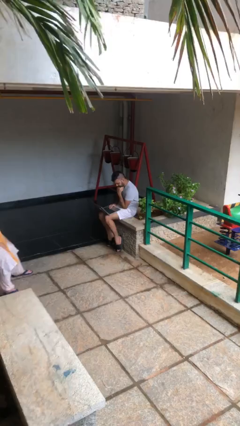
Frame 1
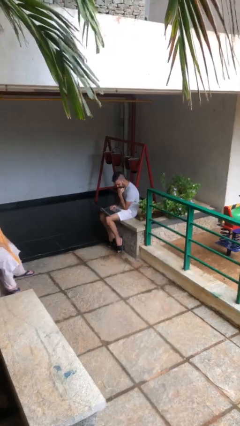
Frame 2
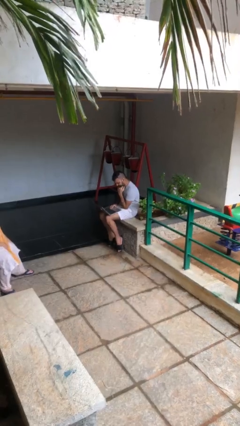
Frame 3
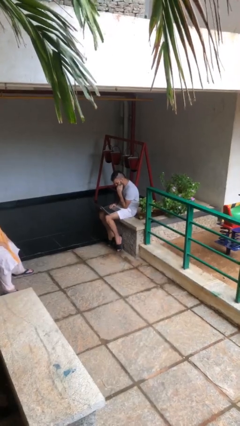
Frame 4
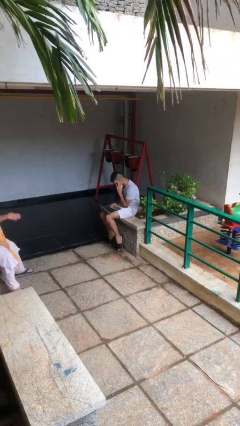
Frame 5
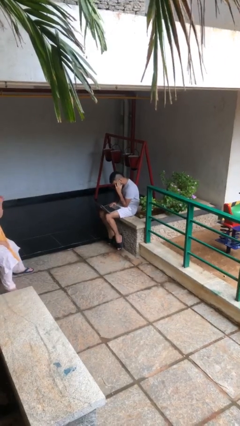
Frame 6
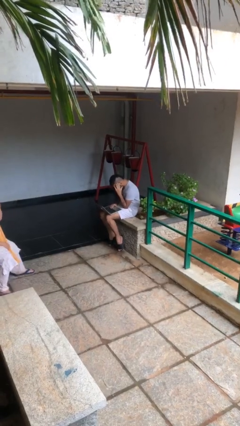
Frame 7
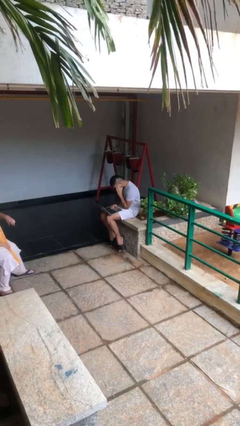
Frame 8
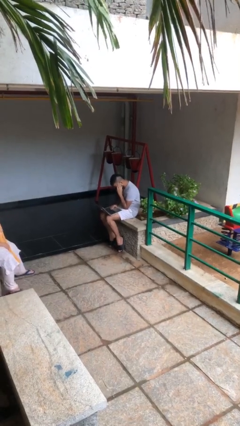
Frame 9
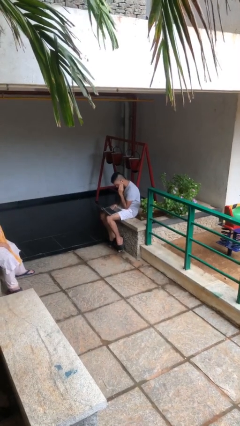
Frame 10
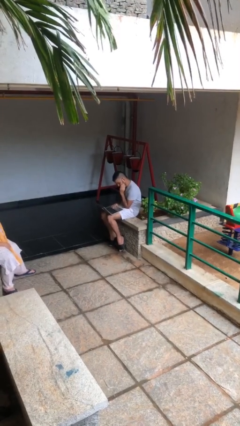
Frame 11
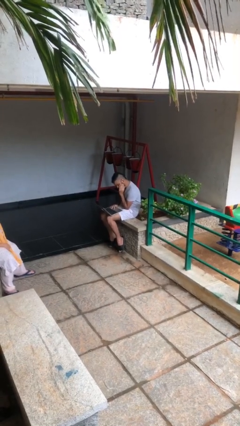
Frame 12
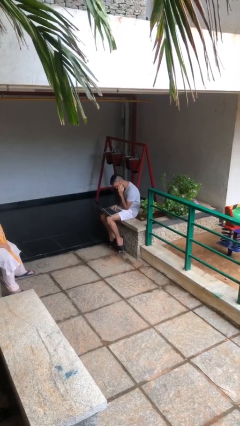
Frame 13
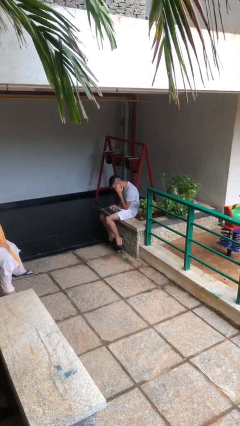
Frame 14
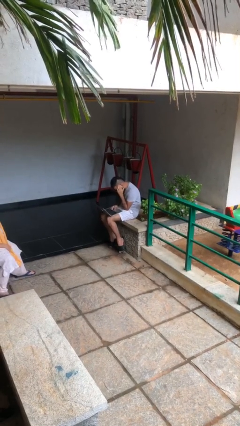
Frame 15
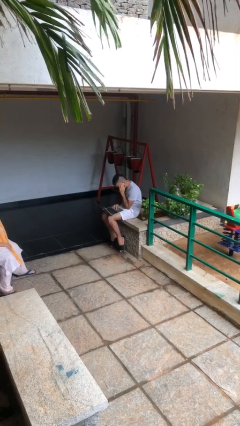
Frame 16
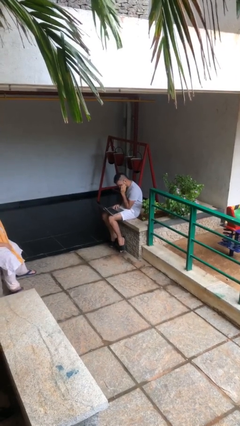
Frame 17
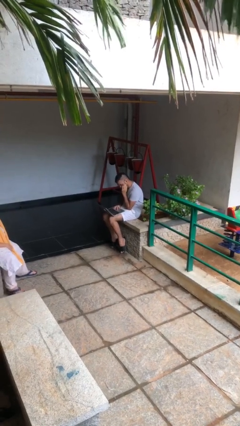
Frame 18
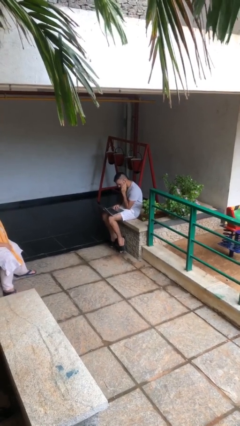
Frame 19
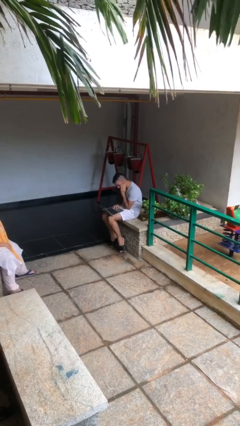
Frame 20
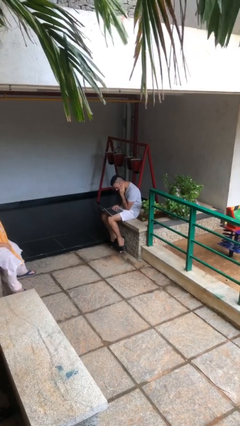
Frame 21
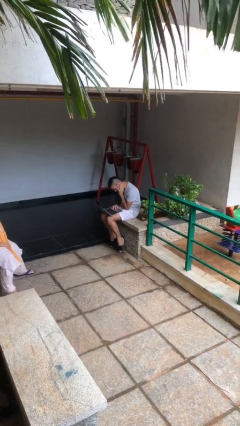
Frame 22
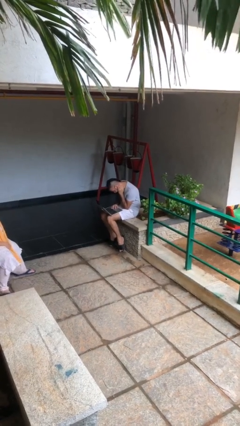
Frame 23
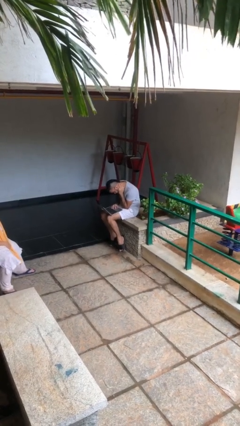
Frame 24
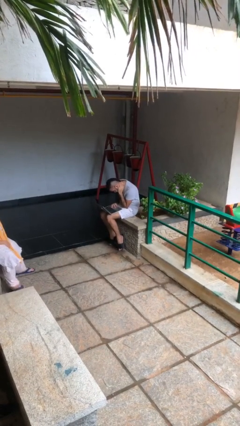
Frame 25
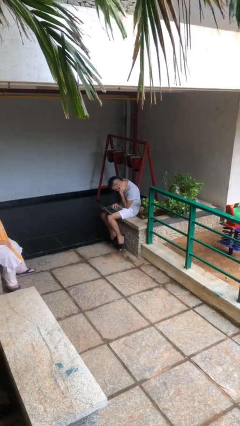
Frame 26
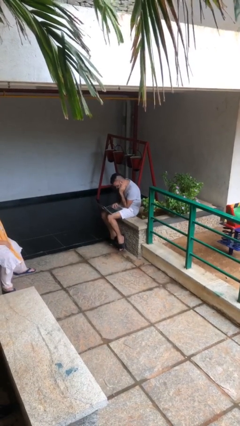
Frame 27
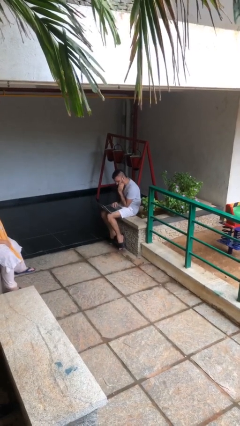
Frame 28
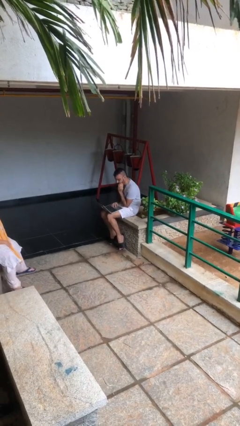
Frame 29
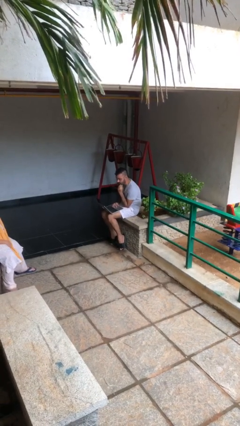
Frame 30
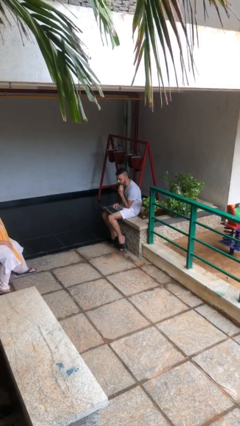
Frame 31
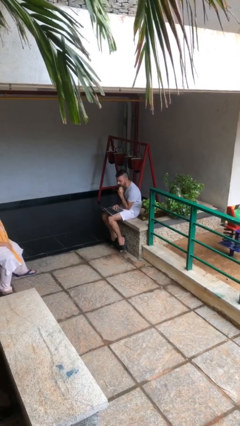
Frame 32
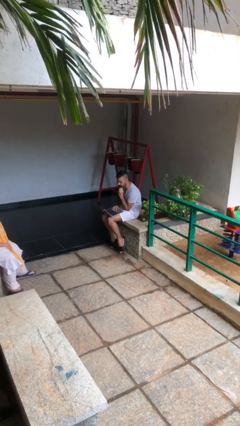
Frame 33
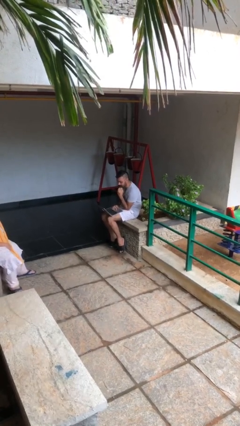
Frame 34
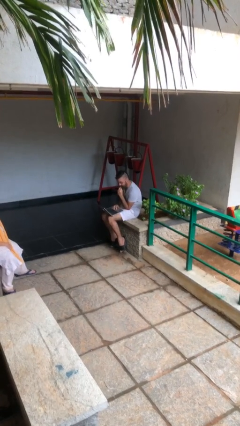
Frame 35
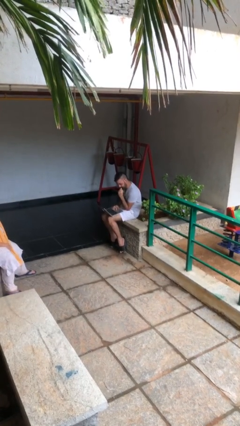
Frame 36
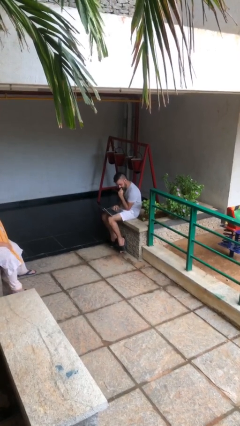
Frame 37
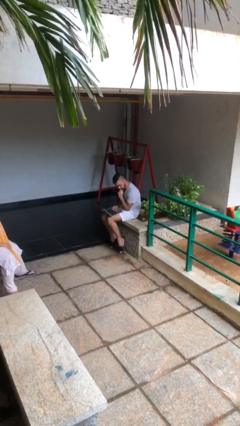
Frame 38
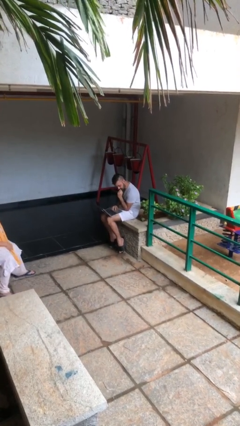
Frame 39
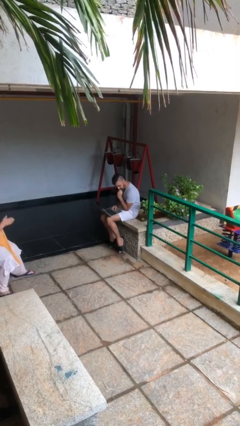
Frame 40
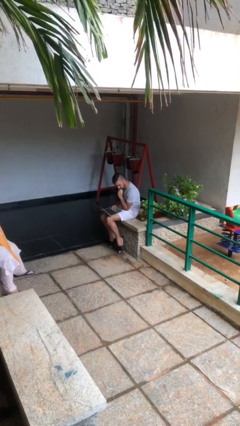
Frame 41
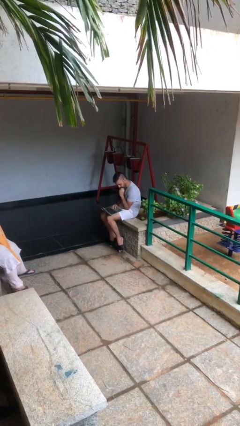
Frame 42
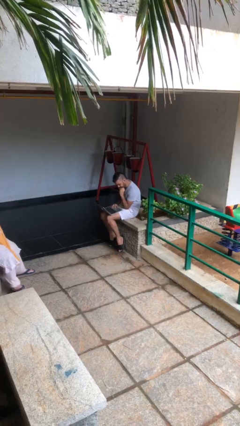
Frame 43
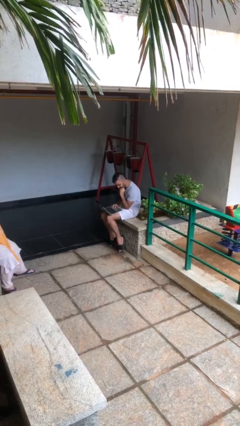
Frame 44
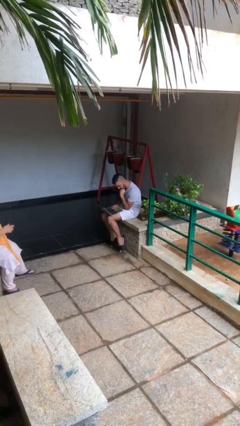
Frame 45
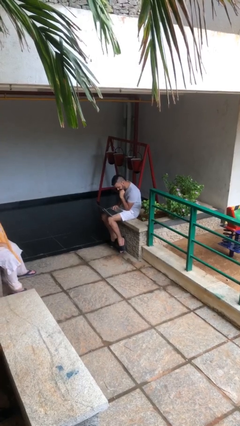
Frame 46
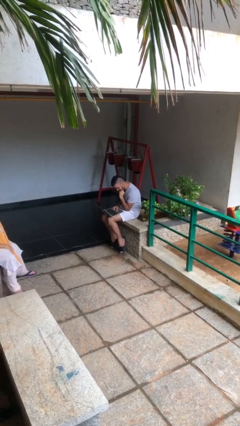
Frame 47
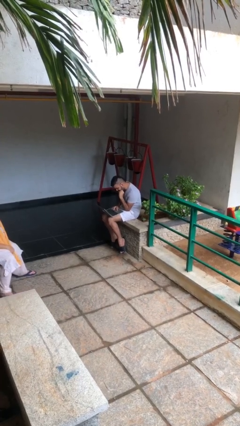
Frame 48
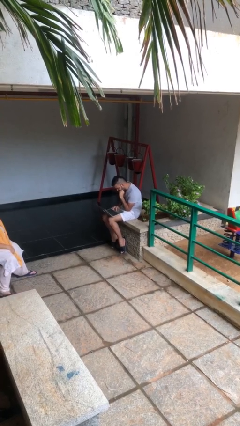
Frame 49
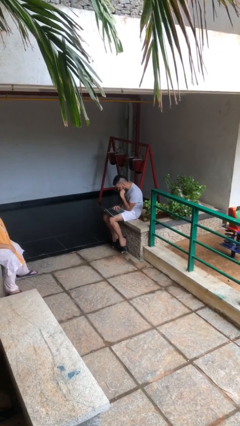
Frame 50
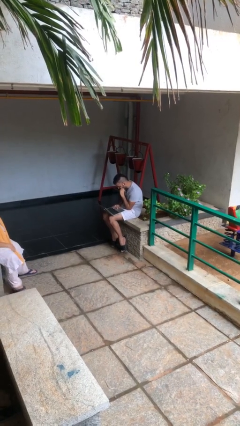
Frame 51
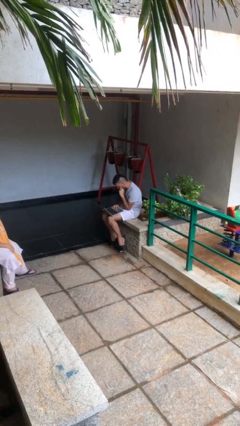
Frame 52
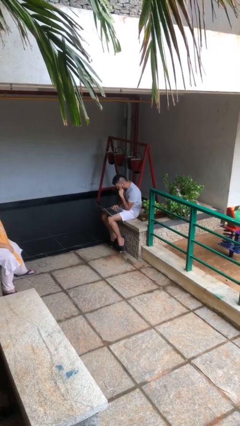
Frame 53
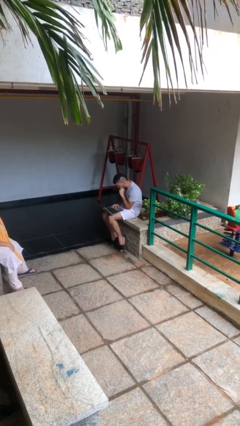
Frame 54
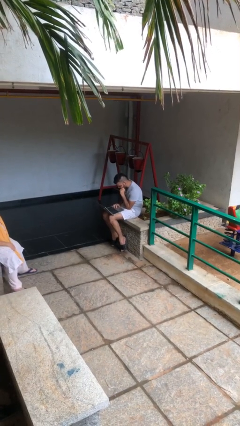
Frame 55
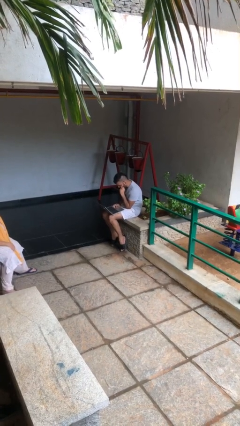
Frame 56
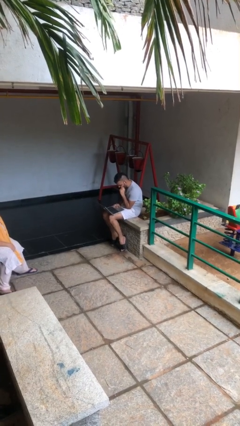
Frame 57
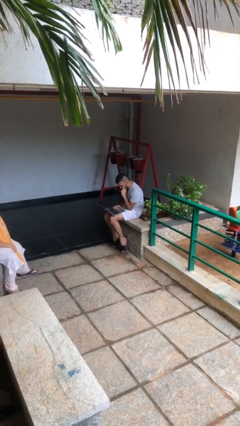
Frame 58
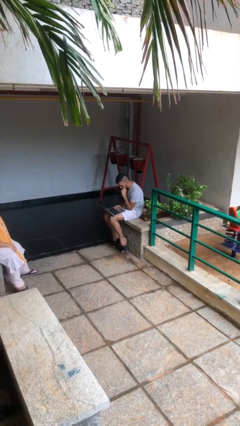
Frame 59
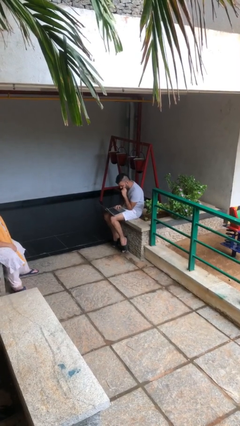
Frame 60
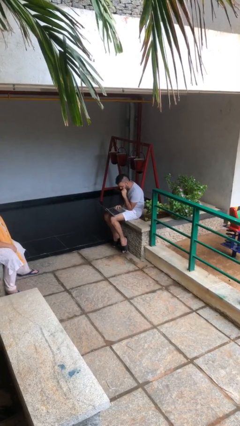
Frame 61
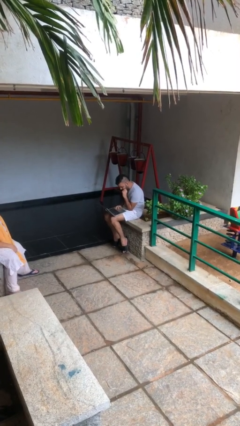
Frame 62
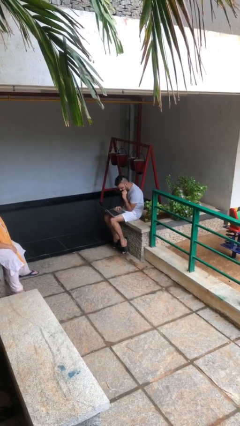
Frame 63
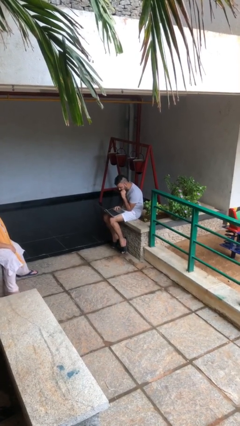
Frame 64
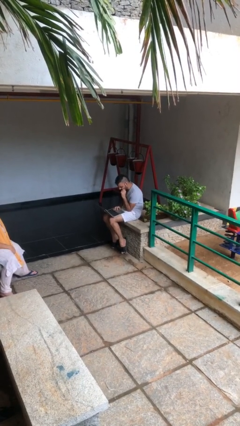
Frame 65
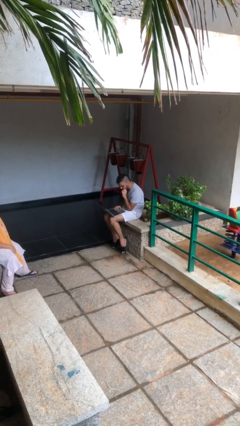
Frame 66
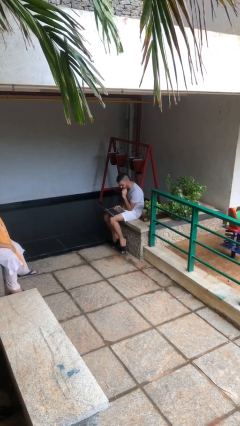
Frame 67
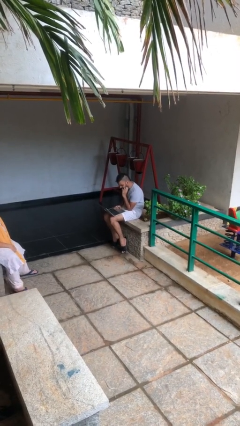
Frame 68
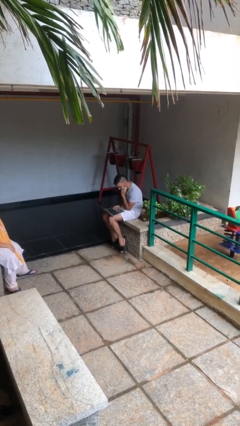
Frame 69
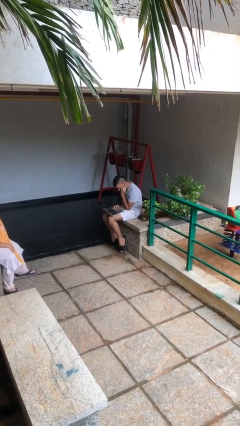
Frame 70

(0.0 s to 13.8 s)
person interacts with laptop

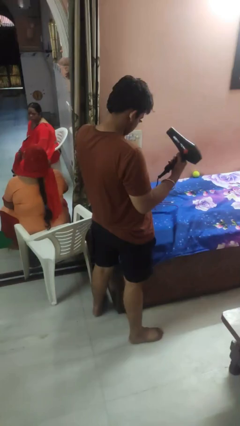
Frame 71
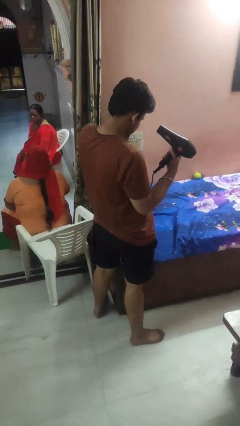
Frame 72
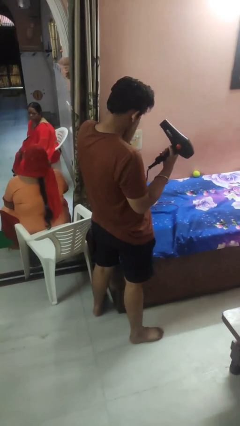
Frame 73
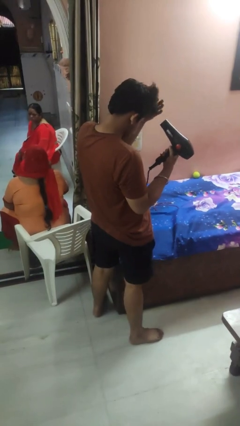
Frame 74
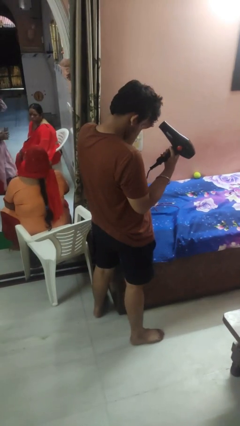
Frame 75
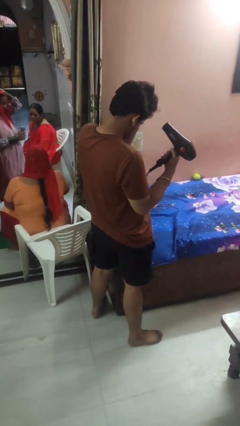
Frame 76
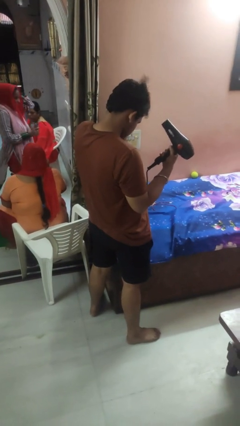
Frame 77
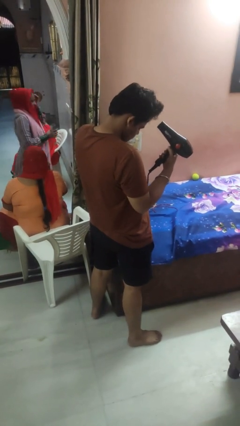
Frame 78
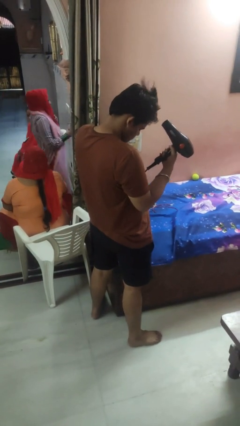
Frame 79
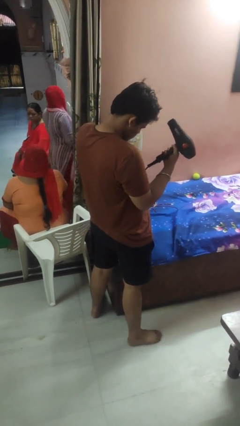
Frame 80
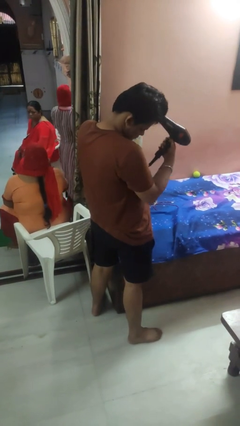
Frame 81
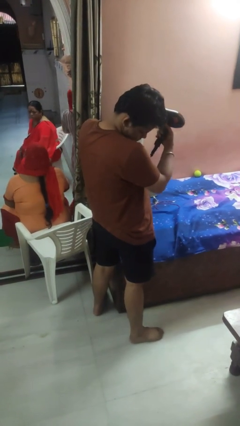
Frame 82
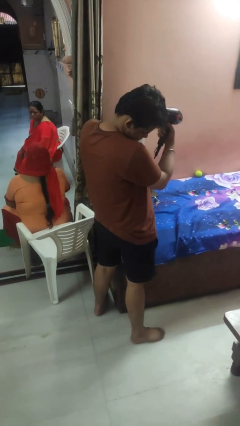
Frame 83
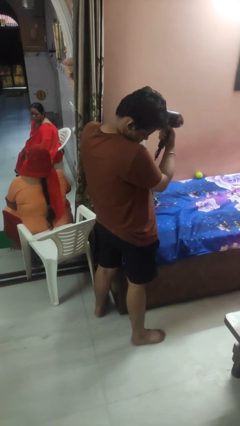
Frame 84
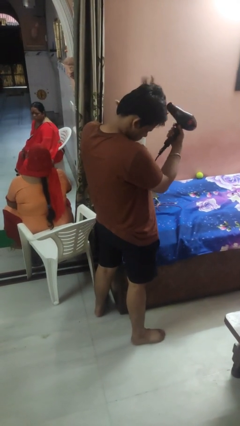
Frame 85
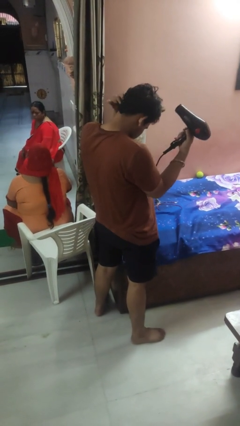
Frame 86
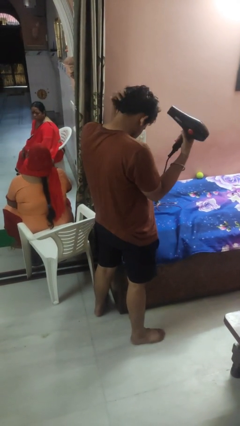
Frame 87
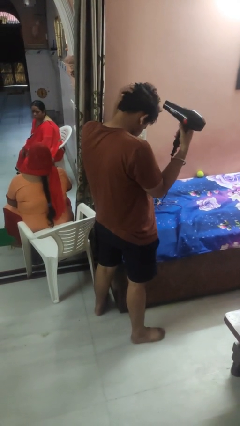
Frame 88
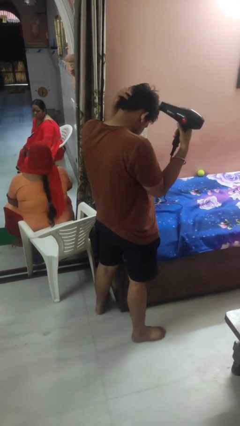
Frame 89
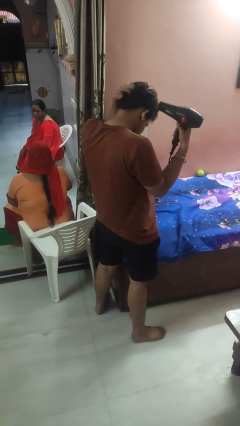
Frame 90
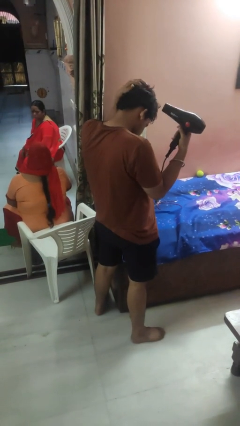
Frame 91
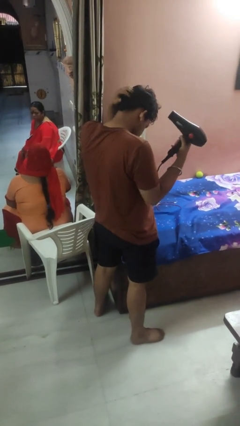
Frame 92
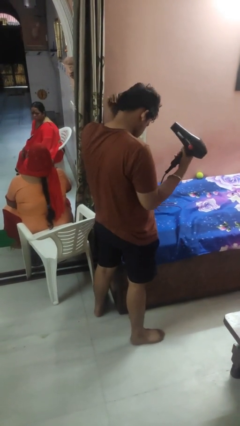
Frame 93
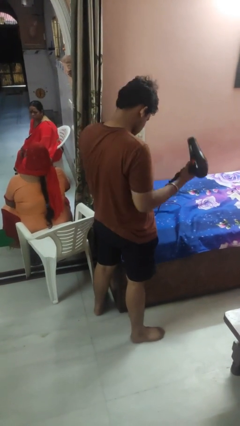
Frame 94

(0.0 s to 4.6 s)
person dries hair with hairdryer
